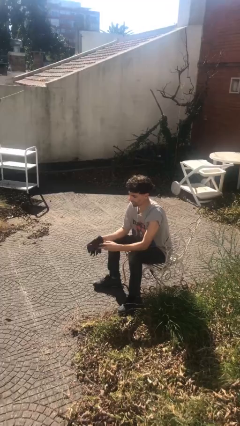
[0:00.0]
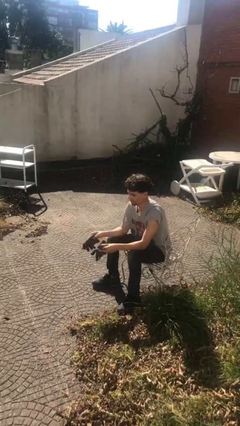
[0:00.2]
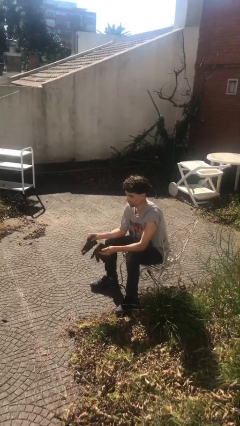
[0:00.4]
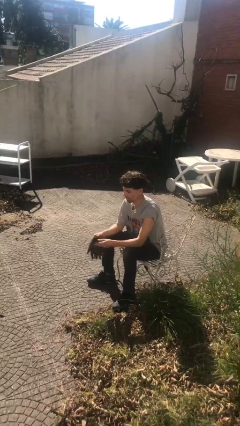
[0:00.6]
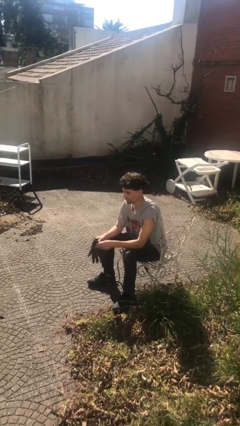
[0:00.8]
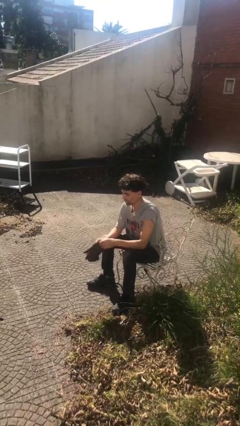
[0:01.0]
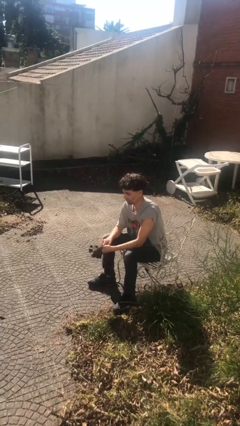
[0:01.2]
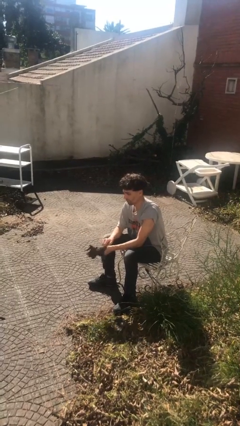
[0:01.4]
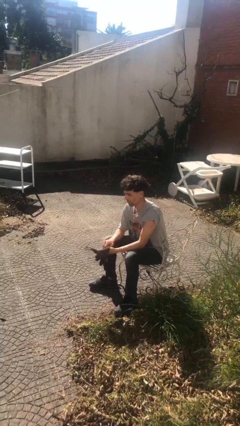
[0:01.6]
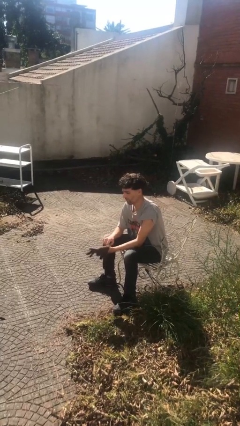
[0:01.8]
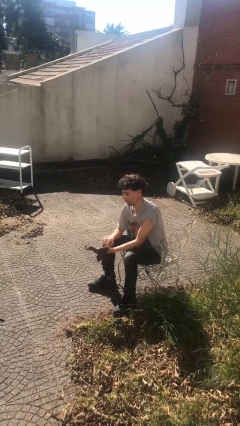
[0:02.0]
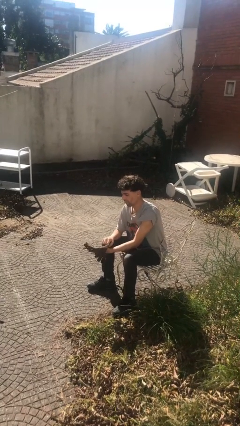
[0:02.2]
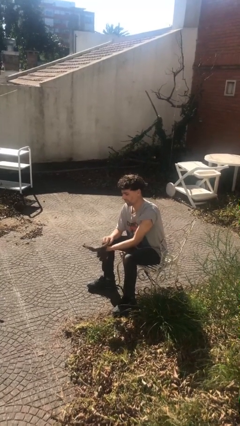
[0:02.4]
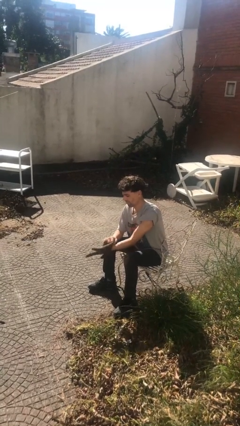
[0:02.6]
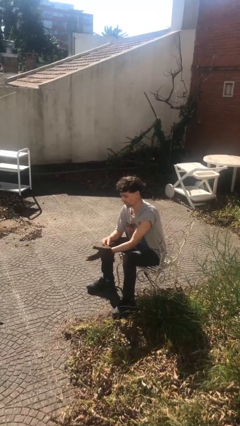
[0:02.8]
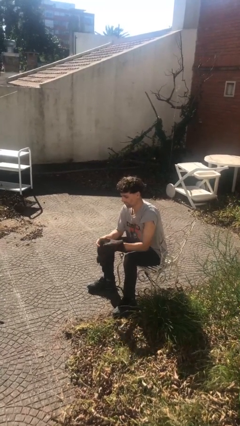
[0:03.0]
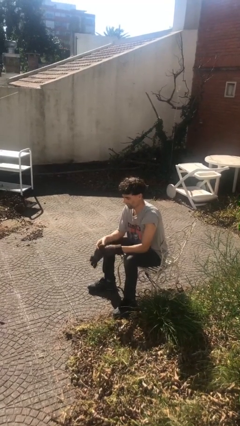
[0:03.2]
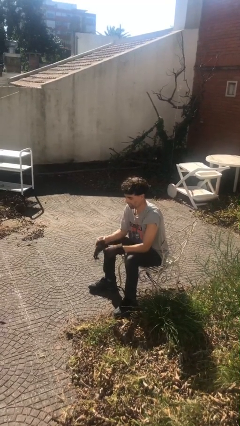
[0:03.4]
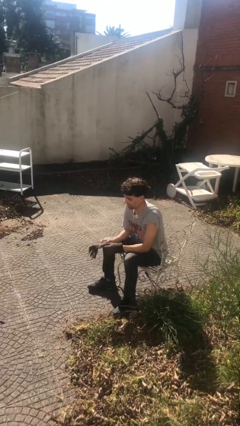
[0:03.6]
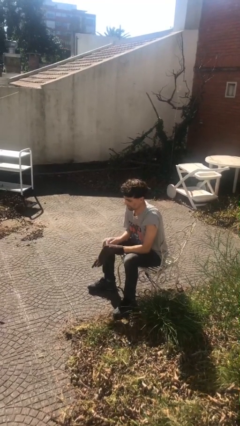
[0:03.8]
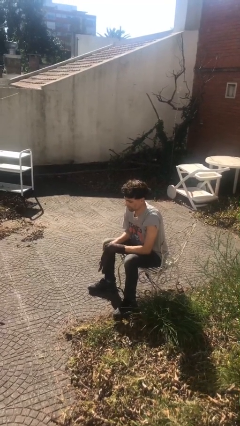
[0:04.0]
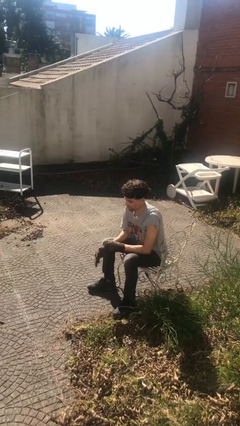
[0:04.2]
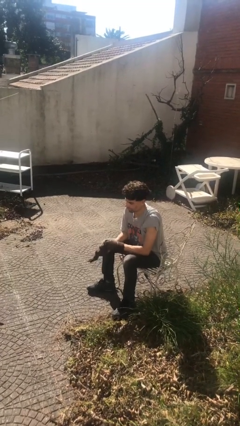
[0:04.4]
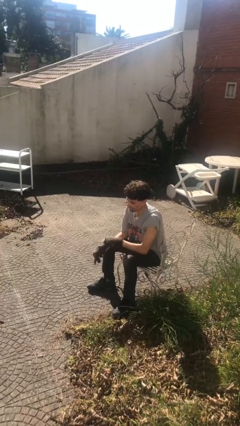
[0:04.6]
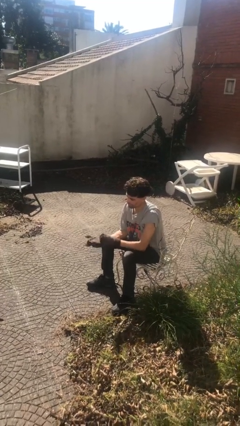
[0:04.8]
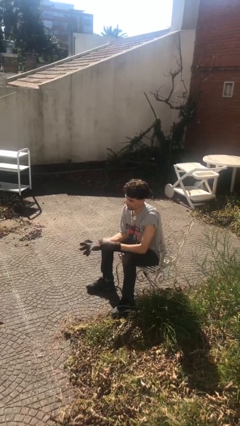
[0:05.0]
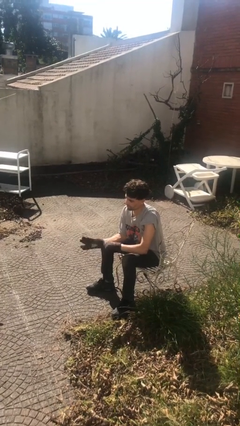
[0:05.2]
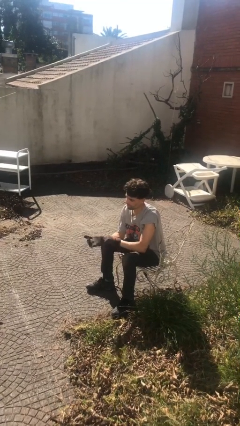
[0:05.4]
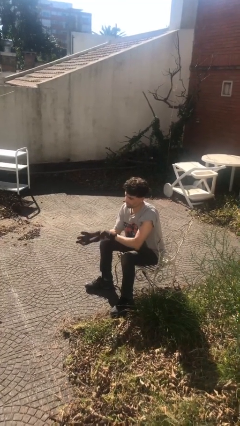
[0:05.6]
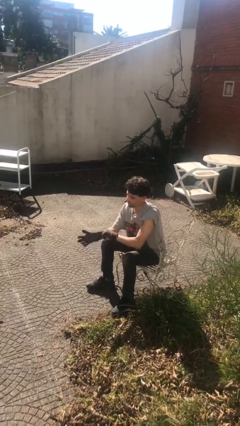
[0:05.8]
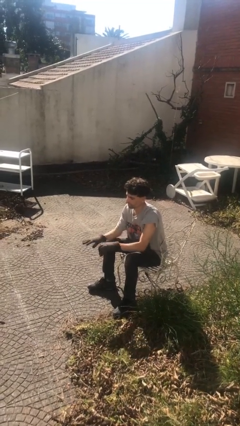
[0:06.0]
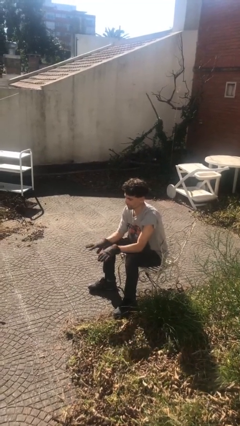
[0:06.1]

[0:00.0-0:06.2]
person puts on gloves

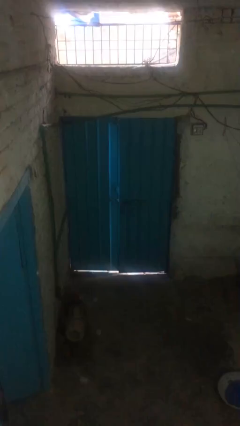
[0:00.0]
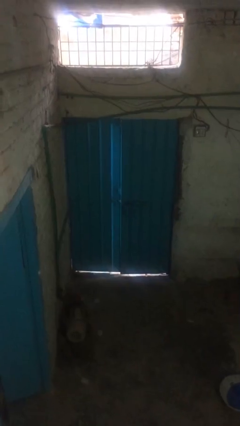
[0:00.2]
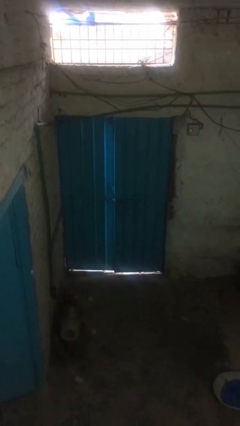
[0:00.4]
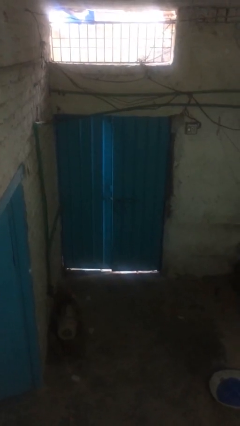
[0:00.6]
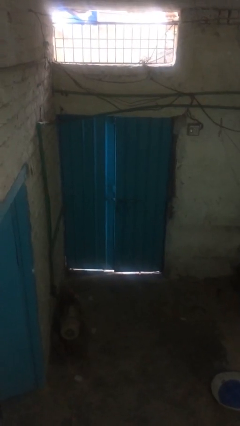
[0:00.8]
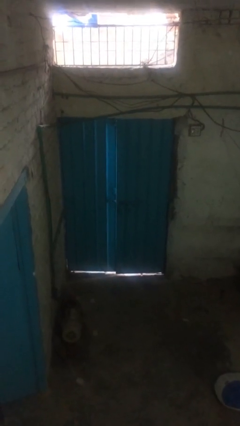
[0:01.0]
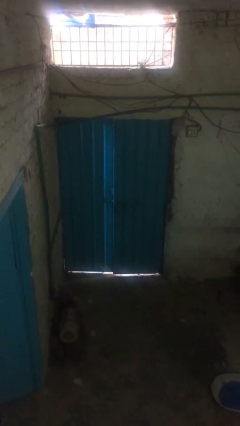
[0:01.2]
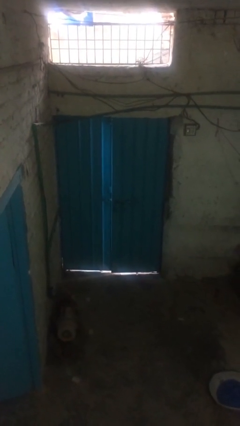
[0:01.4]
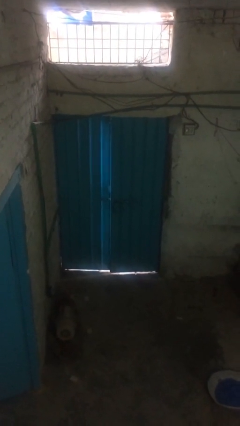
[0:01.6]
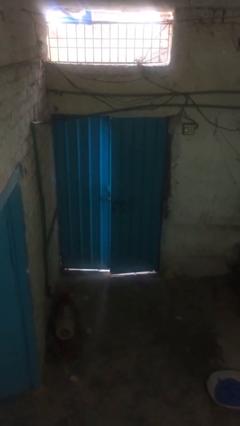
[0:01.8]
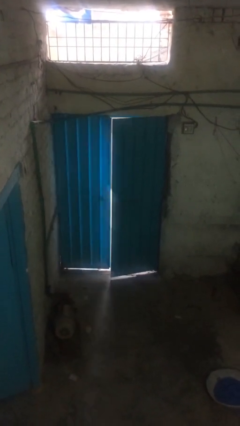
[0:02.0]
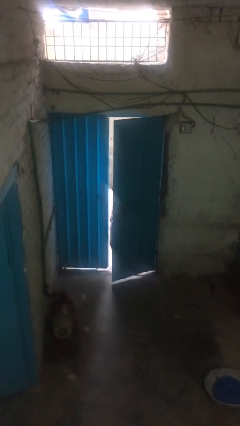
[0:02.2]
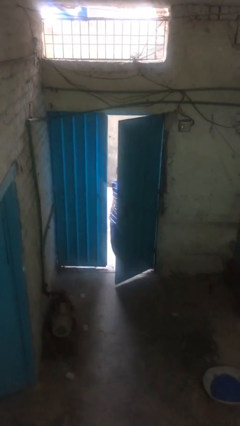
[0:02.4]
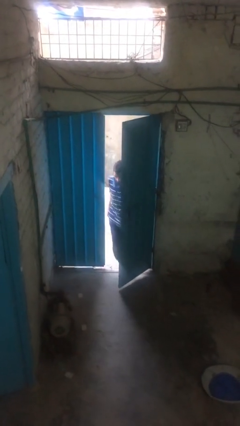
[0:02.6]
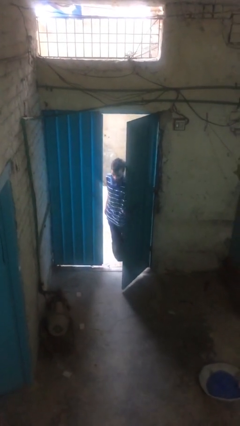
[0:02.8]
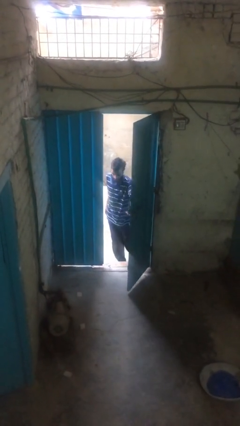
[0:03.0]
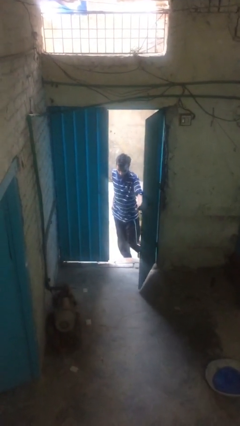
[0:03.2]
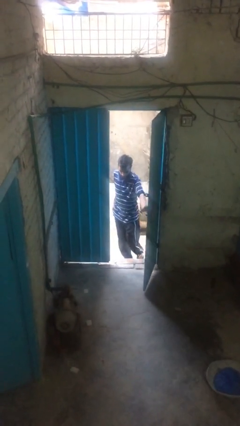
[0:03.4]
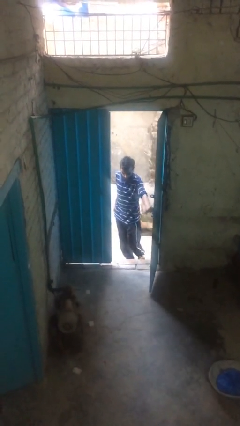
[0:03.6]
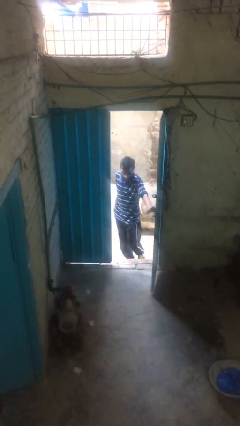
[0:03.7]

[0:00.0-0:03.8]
person opens facility door

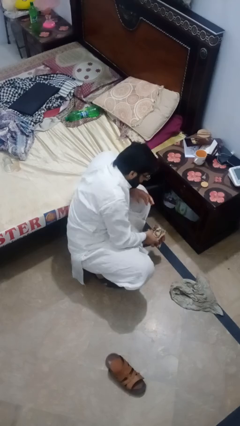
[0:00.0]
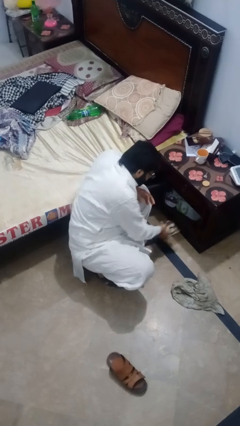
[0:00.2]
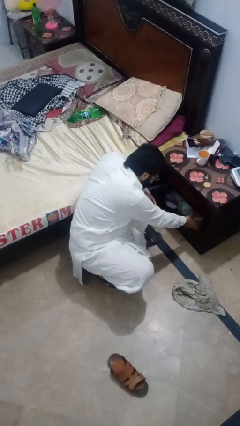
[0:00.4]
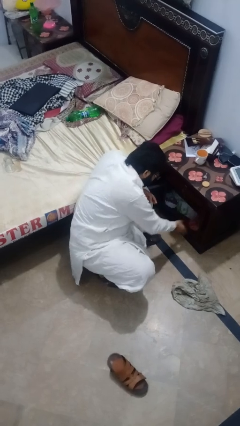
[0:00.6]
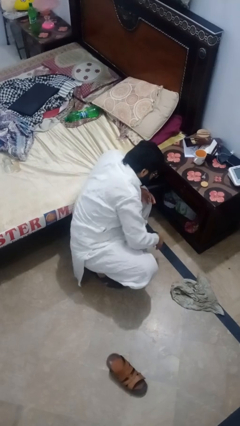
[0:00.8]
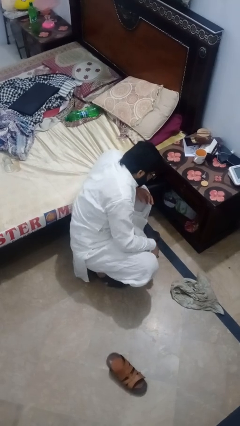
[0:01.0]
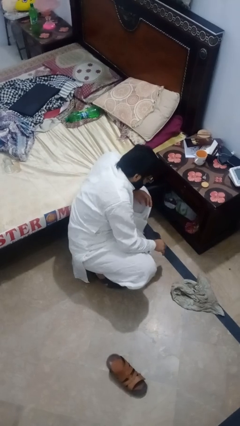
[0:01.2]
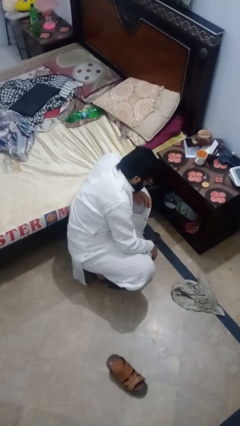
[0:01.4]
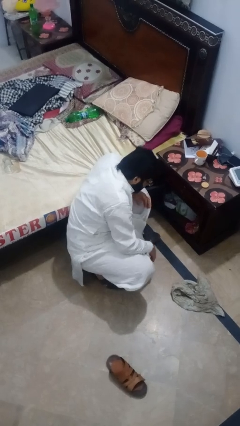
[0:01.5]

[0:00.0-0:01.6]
person puts down object into cabinet

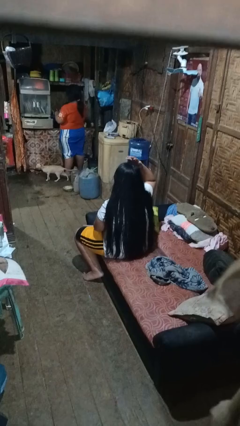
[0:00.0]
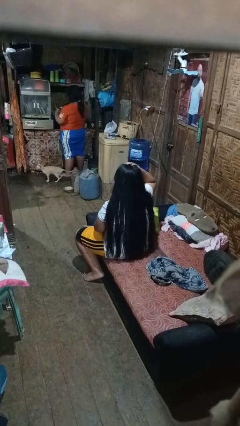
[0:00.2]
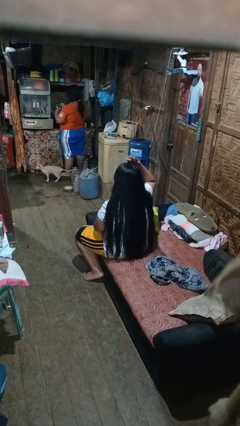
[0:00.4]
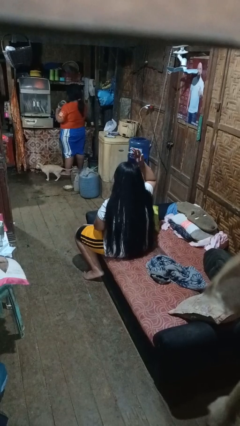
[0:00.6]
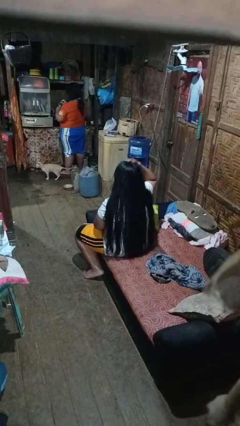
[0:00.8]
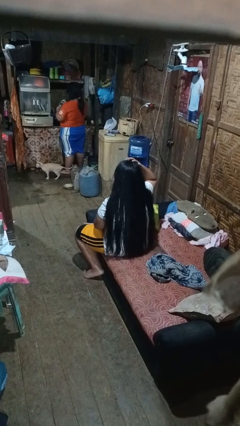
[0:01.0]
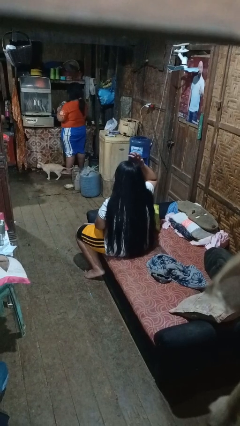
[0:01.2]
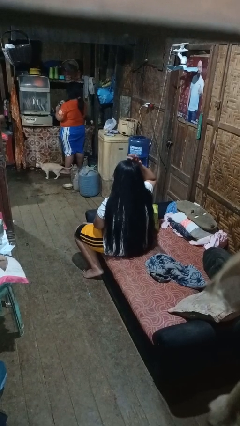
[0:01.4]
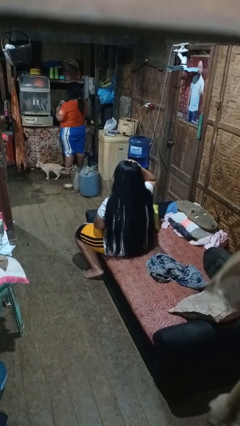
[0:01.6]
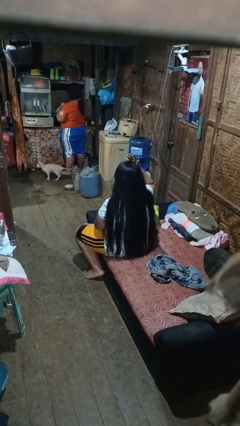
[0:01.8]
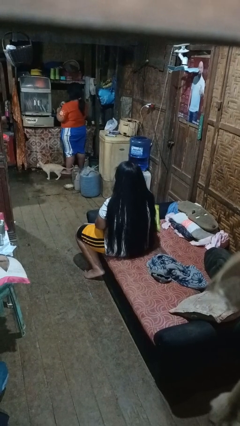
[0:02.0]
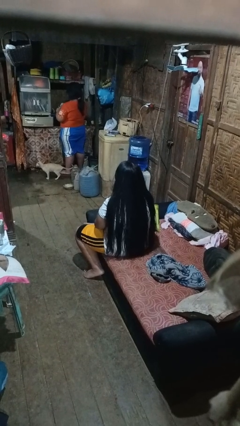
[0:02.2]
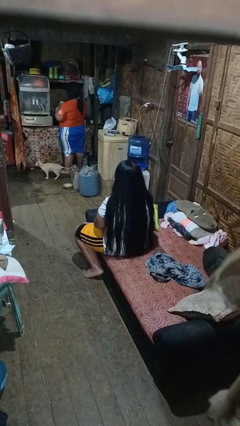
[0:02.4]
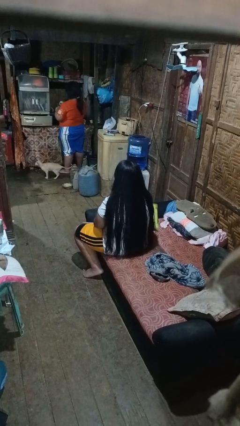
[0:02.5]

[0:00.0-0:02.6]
person pats head

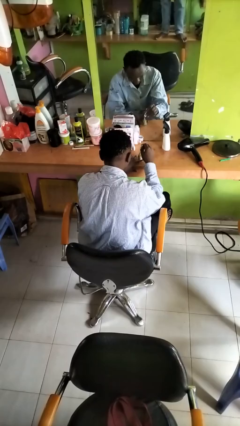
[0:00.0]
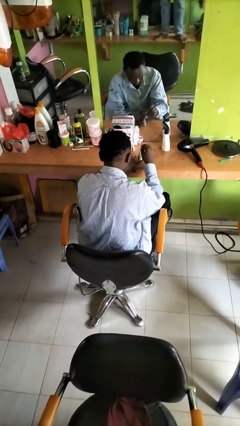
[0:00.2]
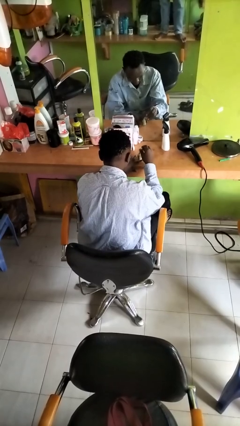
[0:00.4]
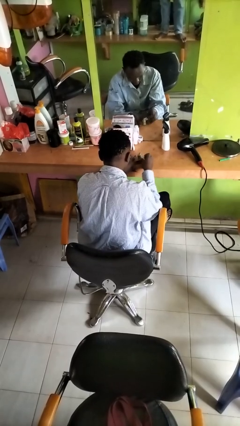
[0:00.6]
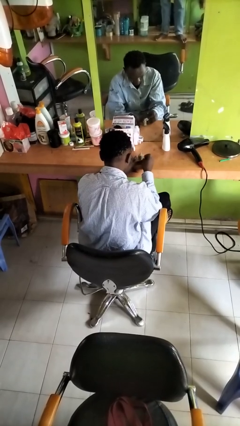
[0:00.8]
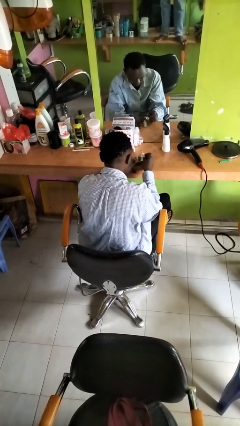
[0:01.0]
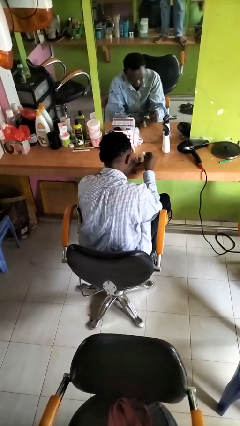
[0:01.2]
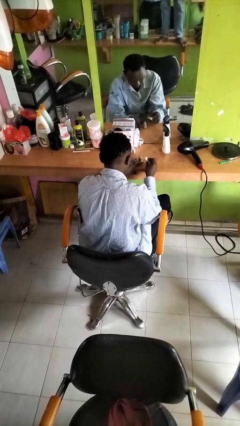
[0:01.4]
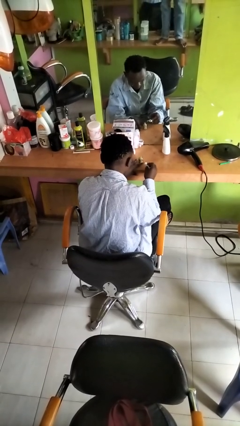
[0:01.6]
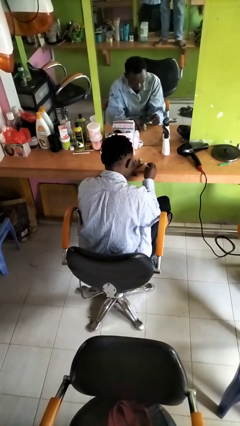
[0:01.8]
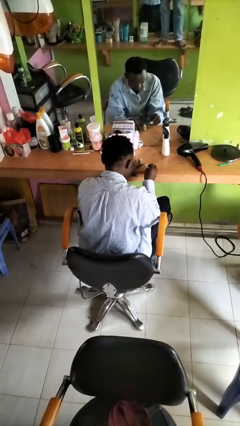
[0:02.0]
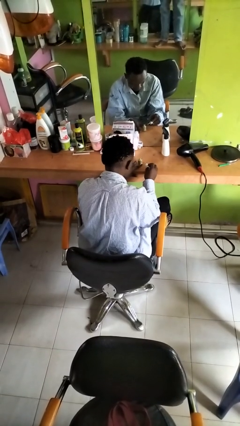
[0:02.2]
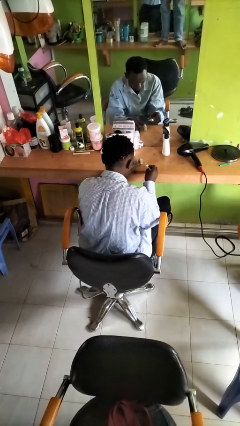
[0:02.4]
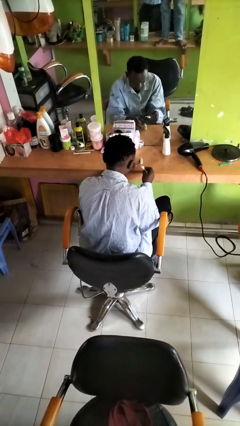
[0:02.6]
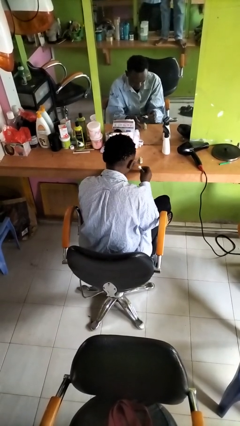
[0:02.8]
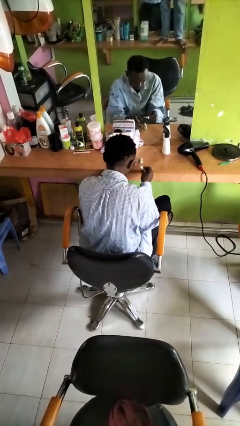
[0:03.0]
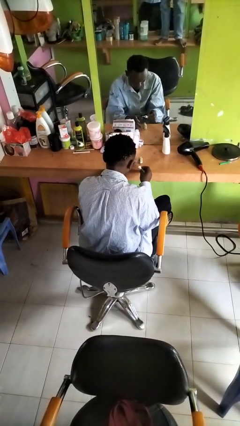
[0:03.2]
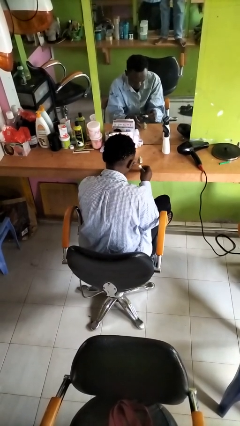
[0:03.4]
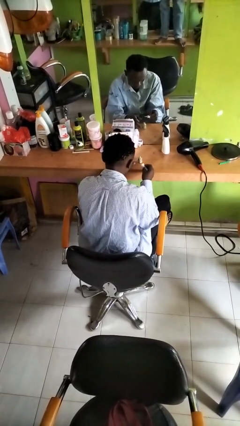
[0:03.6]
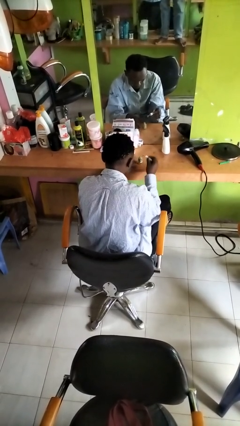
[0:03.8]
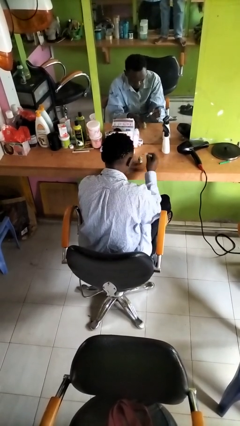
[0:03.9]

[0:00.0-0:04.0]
person paints fingernails
